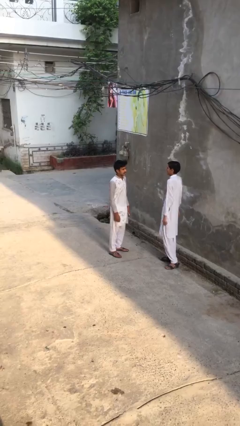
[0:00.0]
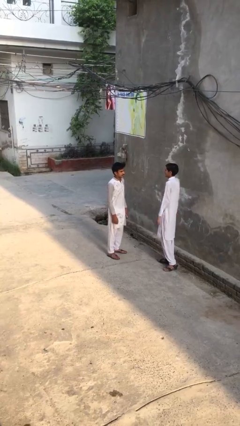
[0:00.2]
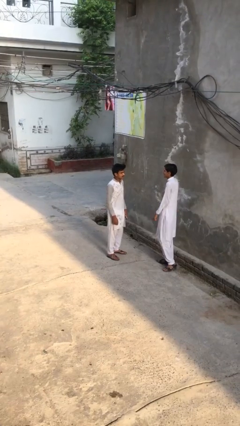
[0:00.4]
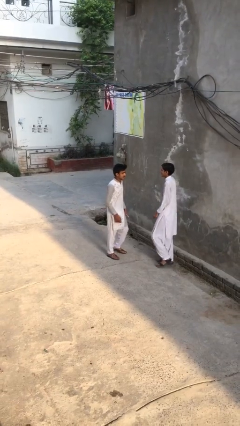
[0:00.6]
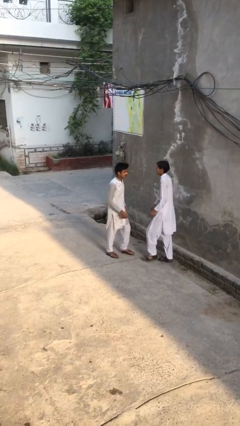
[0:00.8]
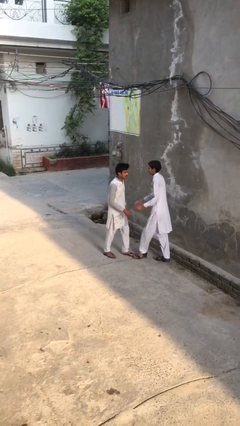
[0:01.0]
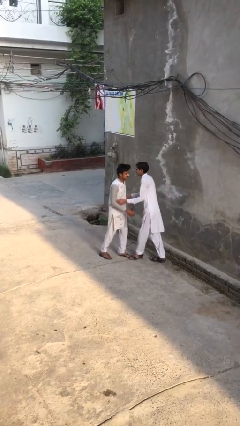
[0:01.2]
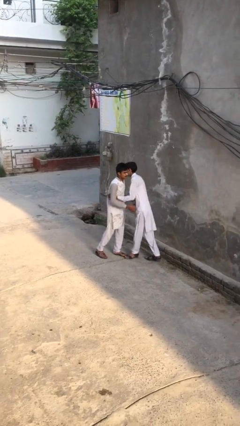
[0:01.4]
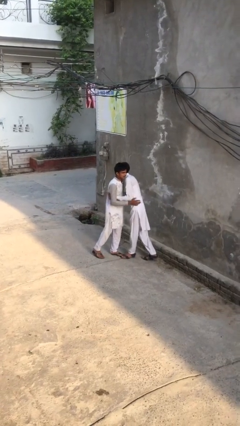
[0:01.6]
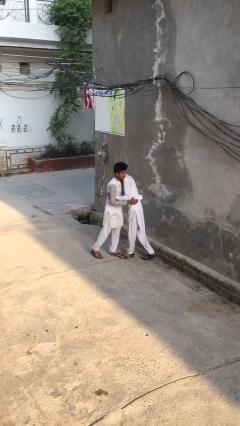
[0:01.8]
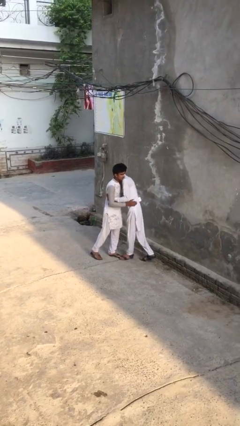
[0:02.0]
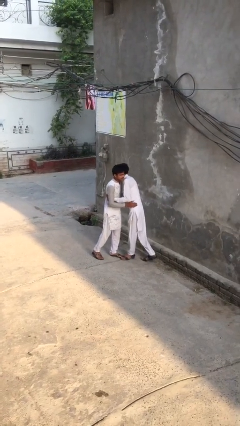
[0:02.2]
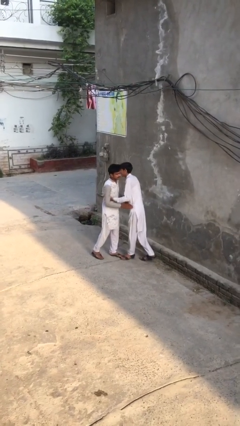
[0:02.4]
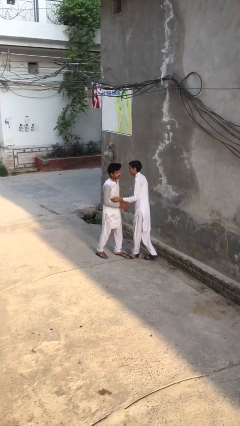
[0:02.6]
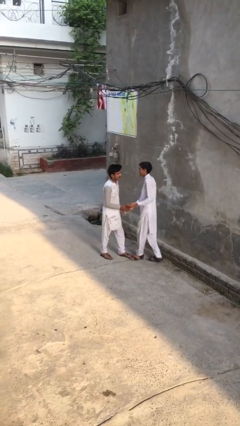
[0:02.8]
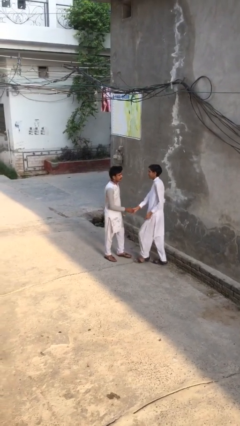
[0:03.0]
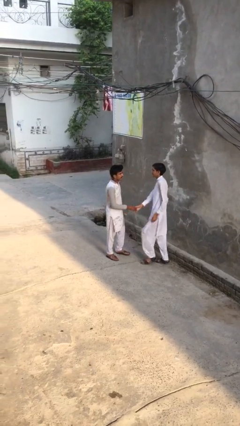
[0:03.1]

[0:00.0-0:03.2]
person embraces person

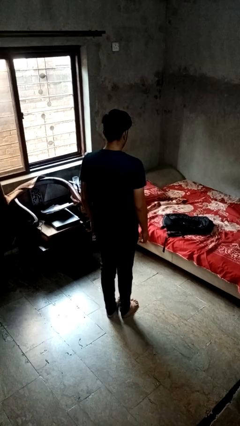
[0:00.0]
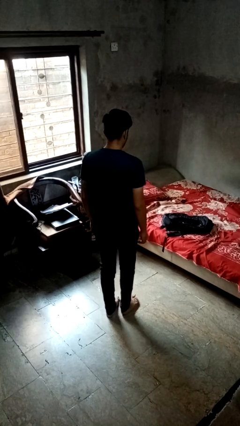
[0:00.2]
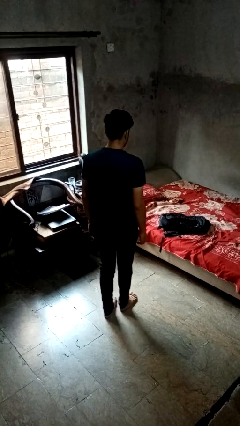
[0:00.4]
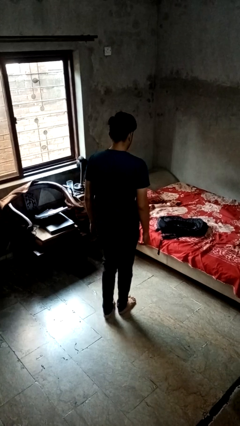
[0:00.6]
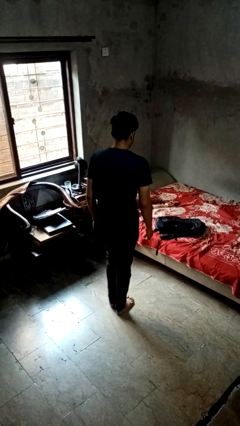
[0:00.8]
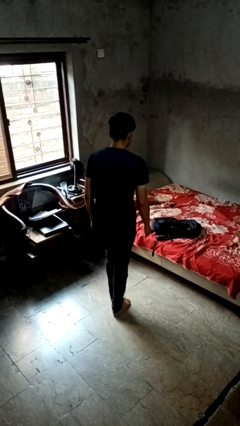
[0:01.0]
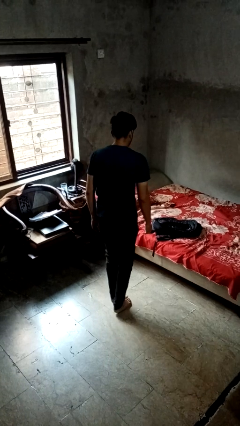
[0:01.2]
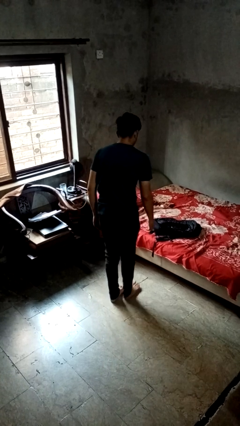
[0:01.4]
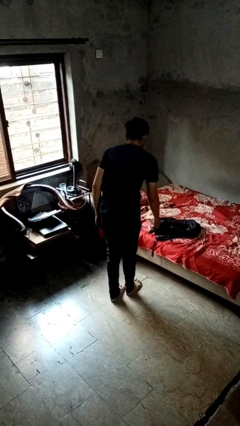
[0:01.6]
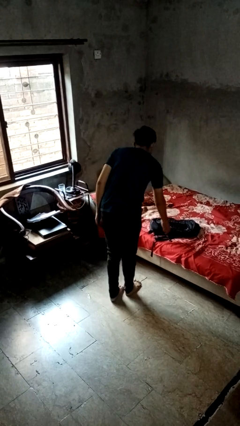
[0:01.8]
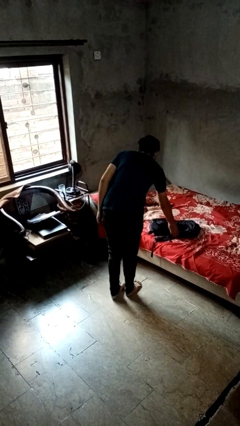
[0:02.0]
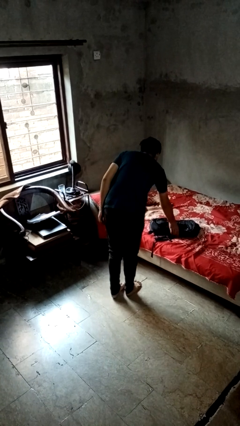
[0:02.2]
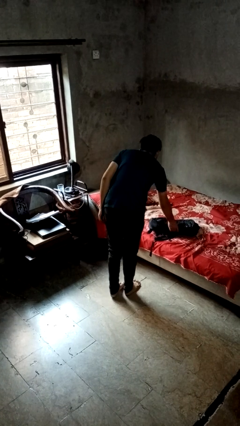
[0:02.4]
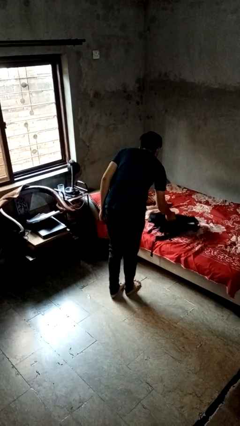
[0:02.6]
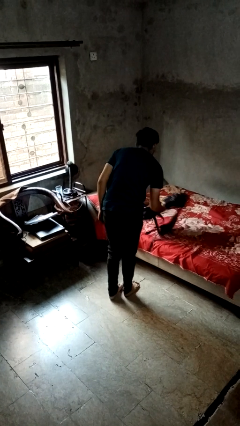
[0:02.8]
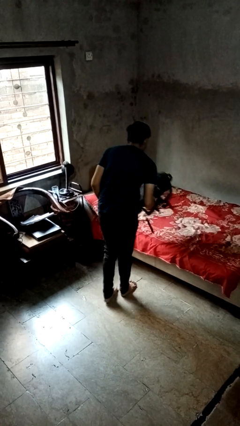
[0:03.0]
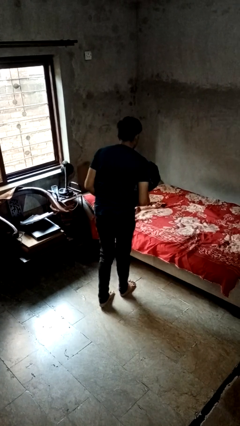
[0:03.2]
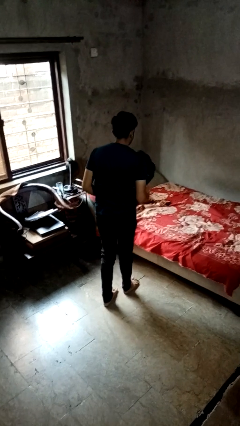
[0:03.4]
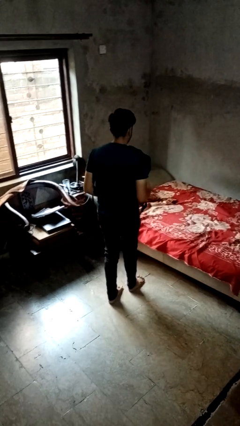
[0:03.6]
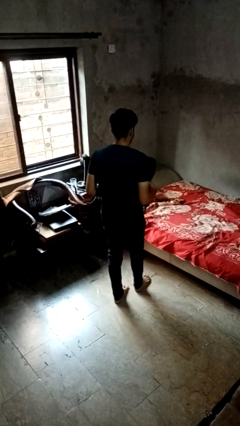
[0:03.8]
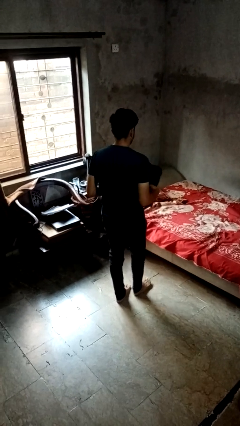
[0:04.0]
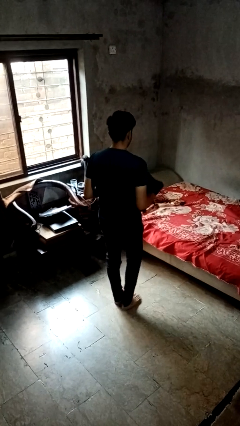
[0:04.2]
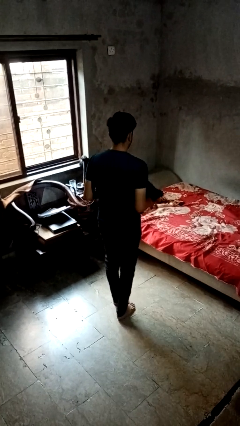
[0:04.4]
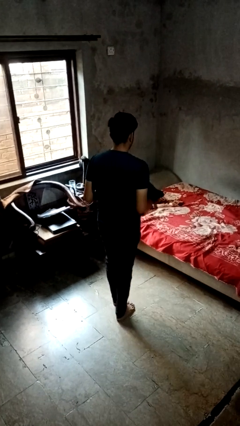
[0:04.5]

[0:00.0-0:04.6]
person picks up object from bed

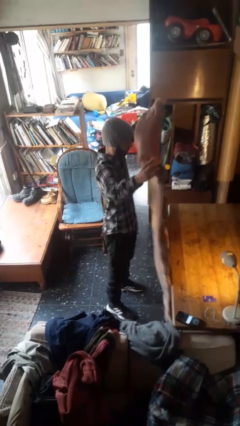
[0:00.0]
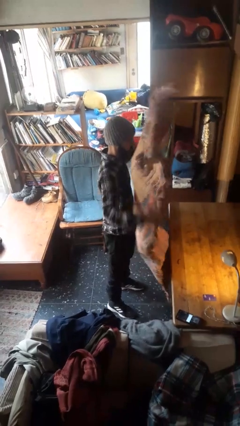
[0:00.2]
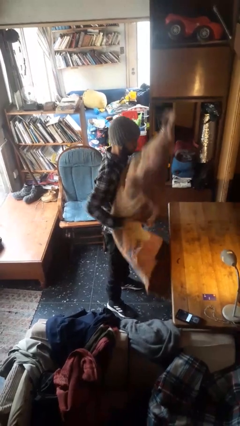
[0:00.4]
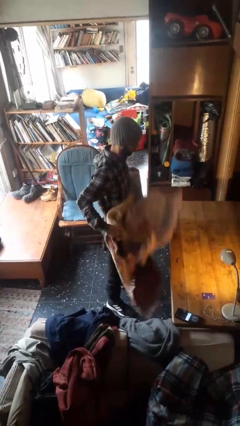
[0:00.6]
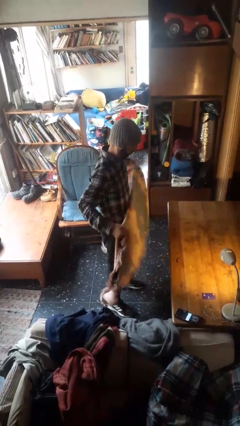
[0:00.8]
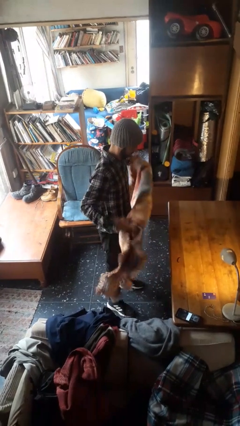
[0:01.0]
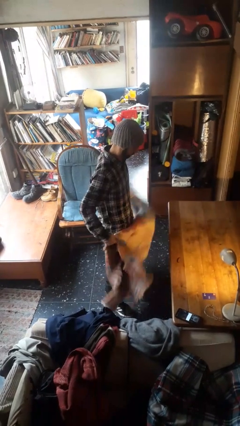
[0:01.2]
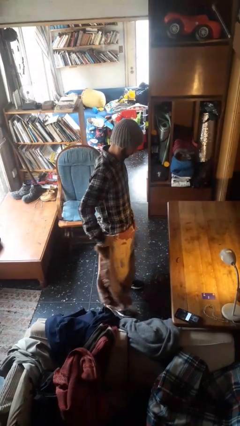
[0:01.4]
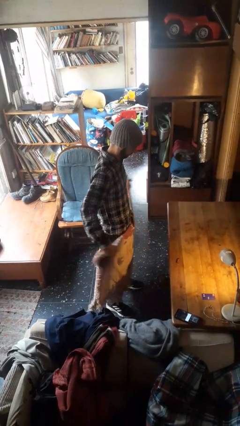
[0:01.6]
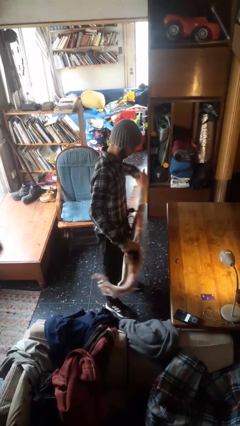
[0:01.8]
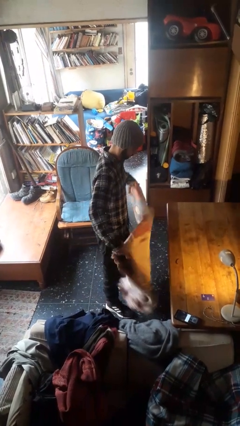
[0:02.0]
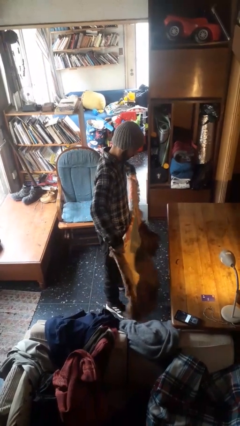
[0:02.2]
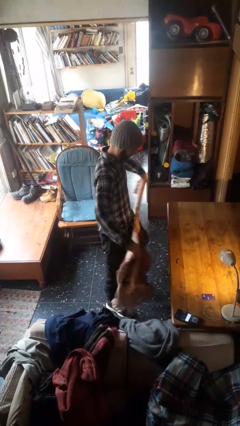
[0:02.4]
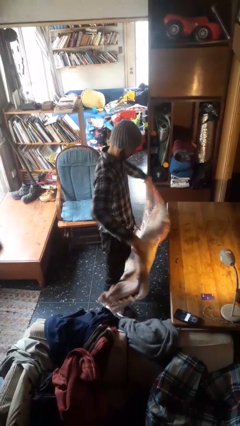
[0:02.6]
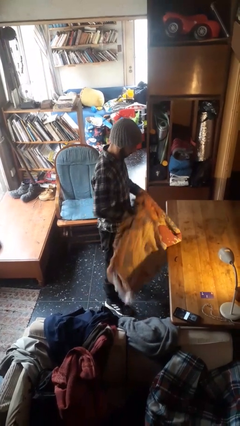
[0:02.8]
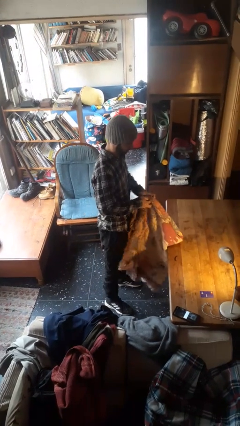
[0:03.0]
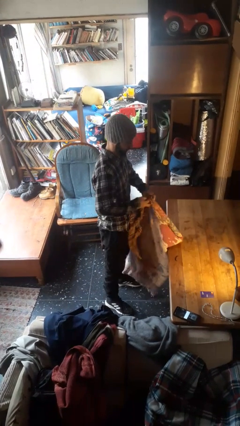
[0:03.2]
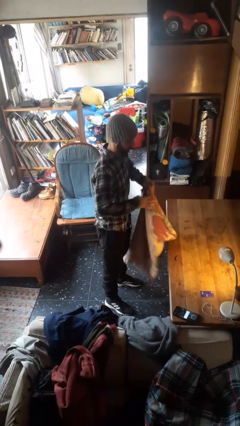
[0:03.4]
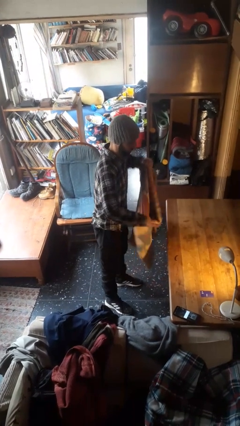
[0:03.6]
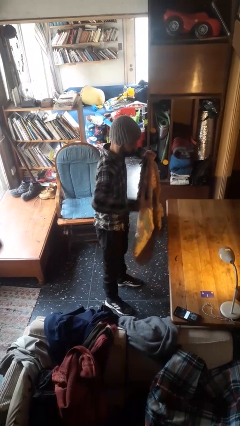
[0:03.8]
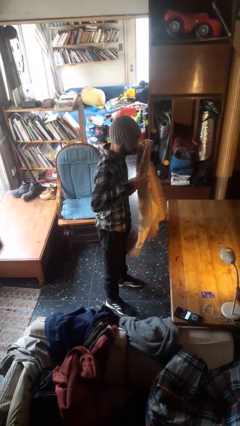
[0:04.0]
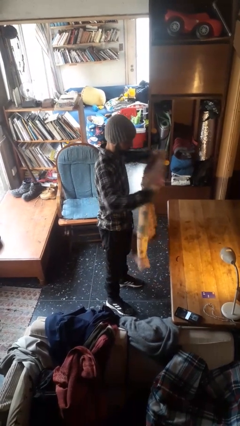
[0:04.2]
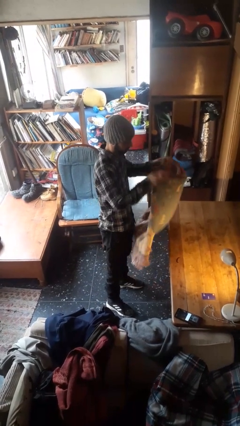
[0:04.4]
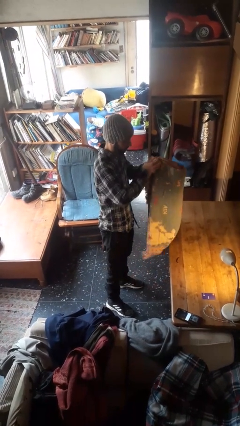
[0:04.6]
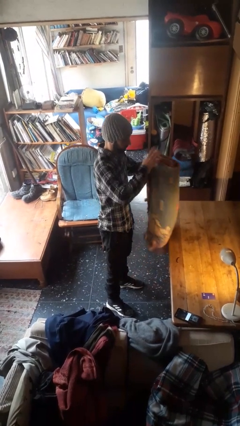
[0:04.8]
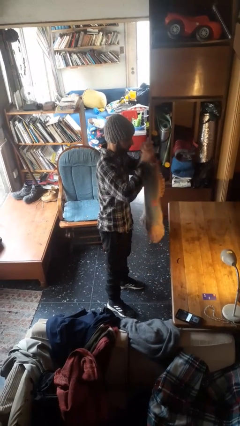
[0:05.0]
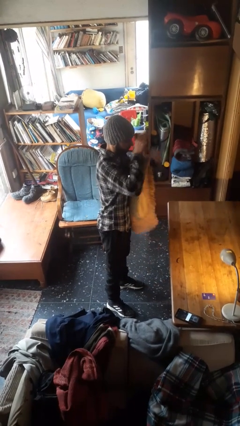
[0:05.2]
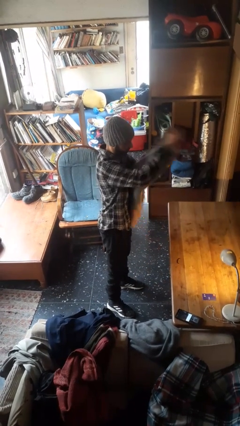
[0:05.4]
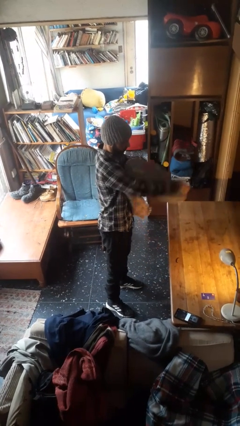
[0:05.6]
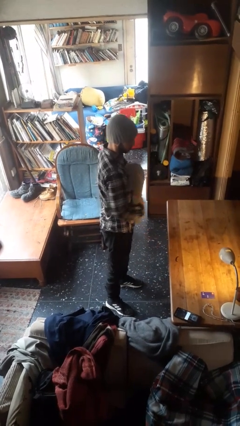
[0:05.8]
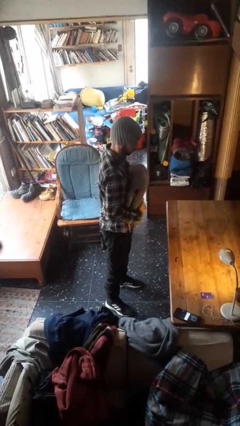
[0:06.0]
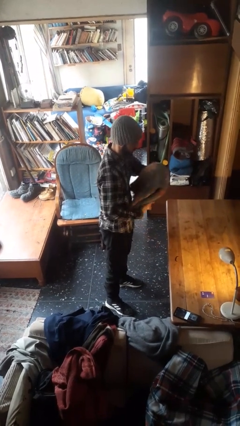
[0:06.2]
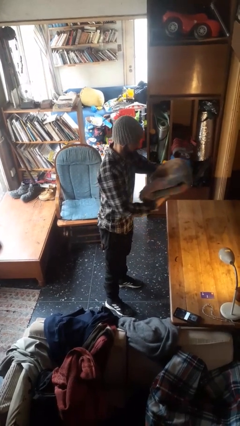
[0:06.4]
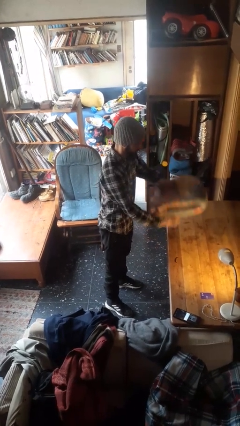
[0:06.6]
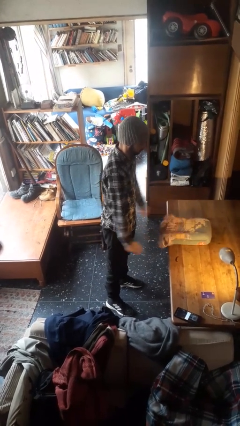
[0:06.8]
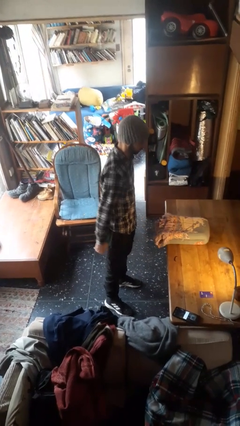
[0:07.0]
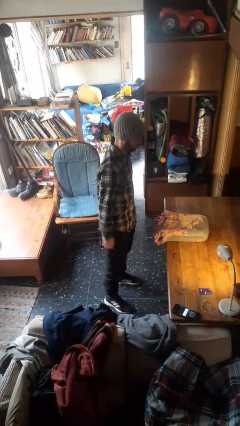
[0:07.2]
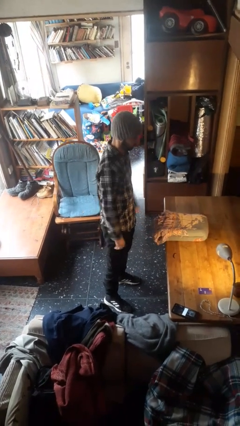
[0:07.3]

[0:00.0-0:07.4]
person folds blanket

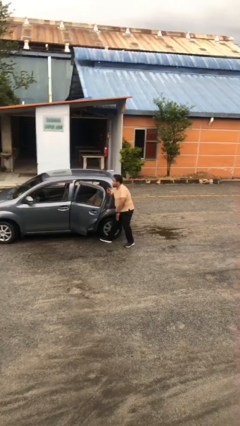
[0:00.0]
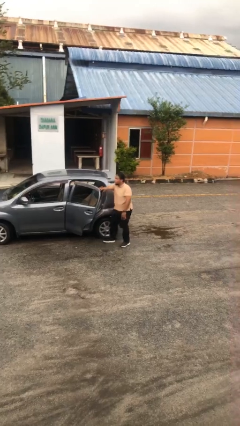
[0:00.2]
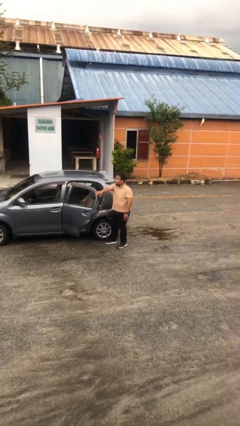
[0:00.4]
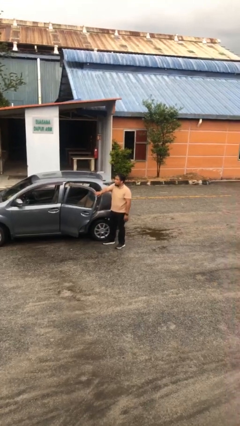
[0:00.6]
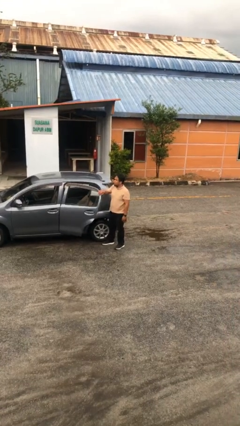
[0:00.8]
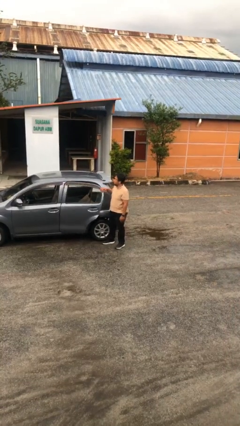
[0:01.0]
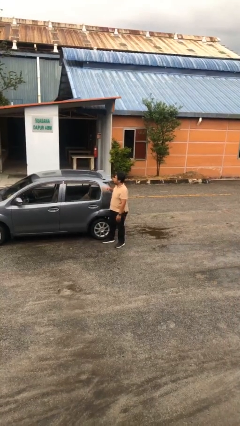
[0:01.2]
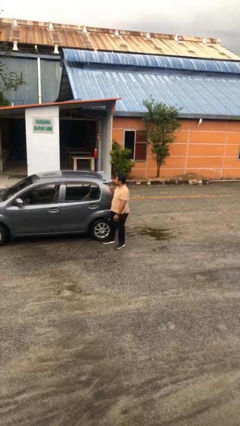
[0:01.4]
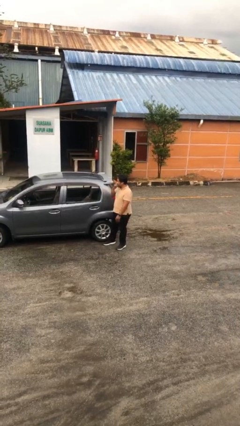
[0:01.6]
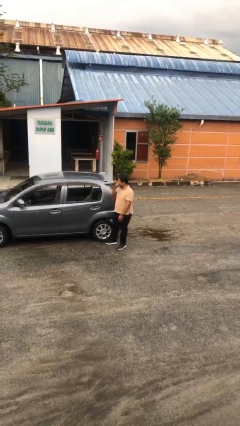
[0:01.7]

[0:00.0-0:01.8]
person closes car door

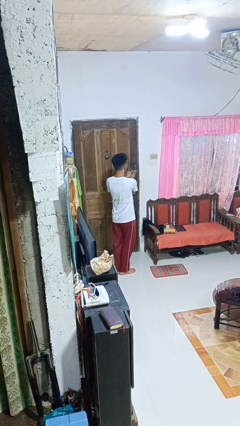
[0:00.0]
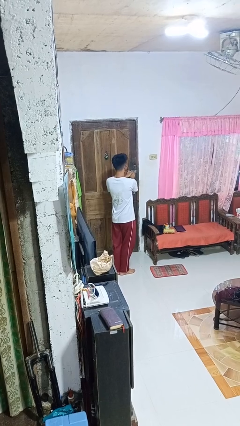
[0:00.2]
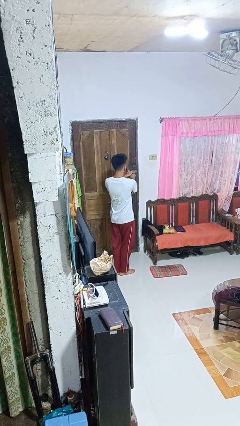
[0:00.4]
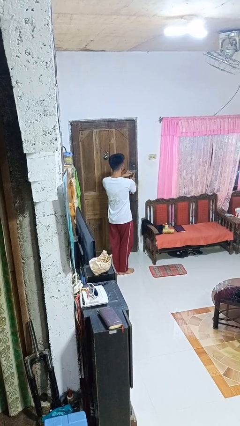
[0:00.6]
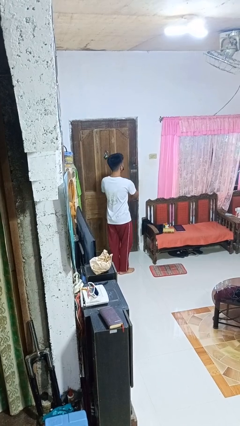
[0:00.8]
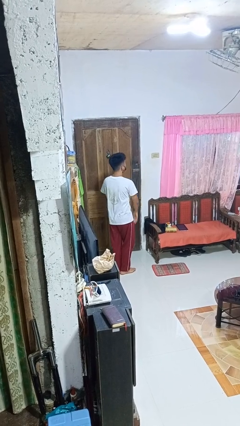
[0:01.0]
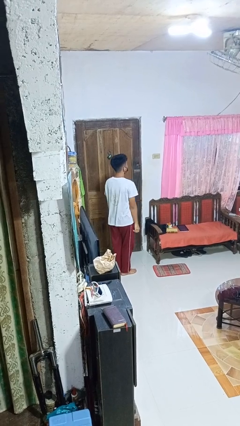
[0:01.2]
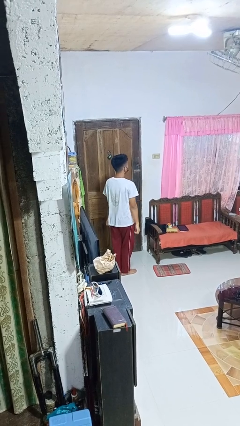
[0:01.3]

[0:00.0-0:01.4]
person locks door with keys
